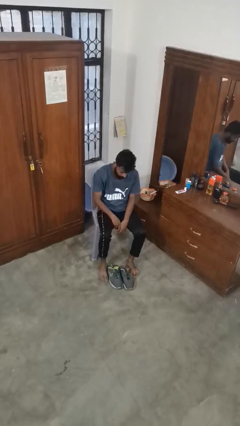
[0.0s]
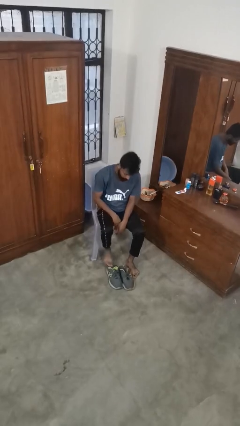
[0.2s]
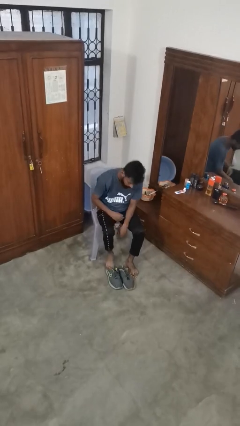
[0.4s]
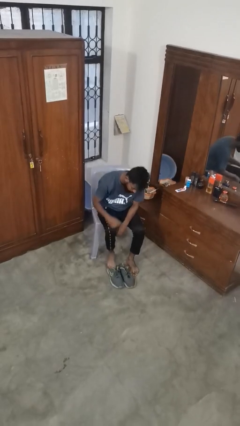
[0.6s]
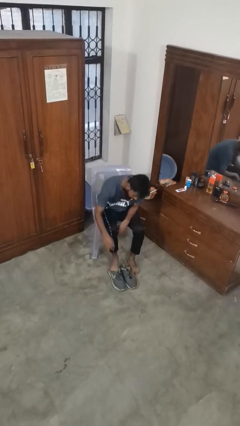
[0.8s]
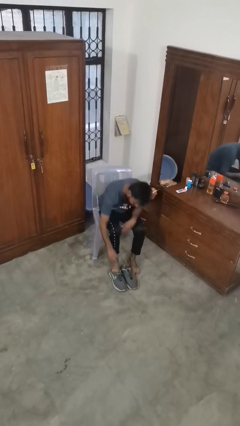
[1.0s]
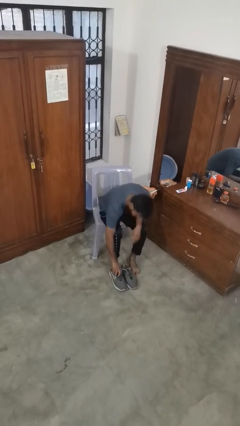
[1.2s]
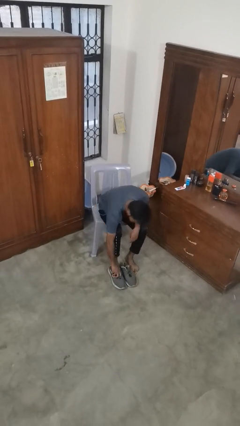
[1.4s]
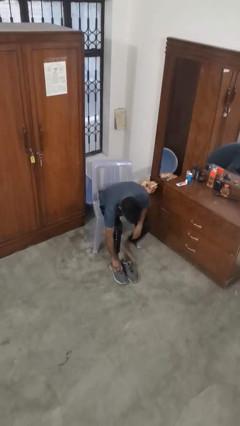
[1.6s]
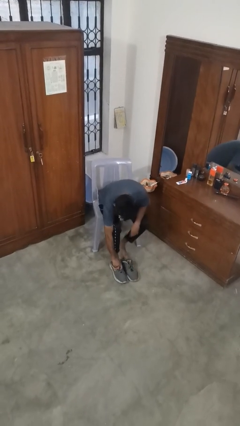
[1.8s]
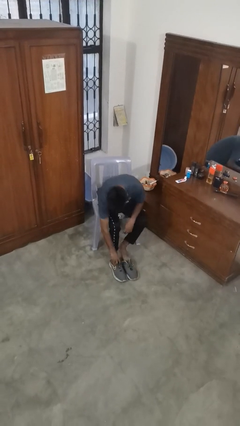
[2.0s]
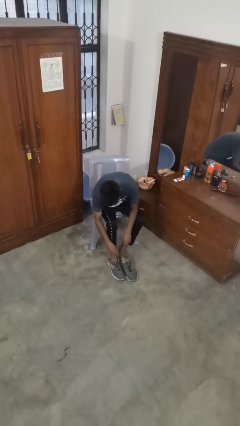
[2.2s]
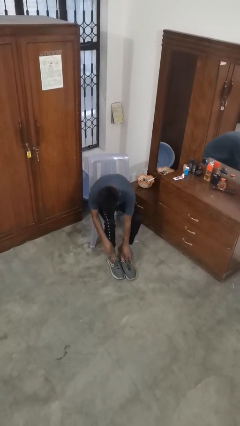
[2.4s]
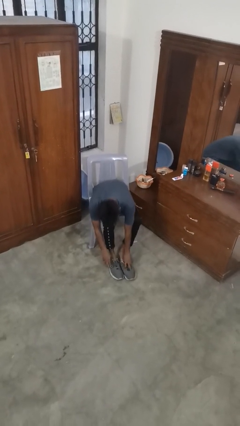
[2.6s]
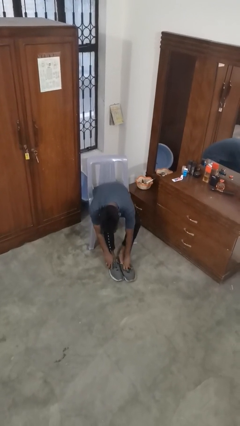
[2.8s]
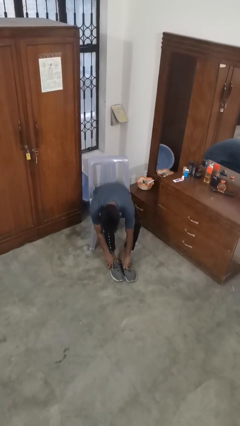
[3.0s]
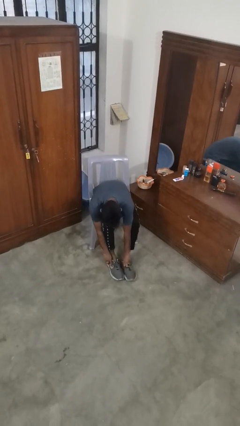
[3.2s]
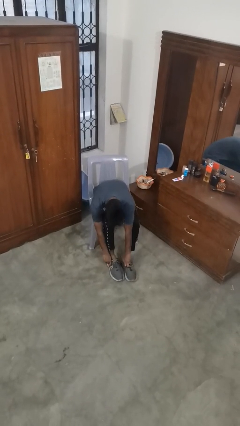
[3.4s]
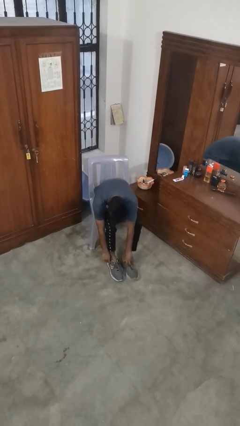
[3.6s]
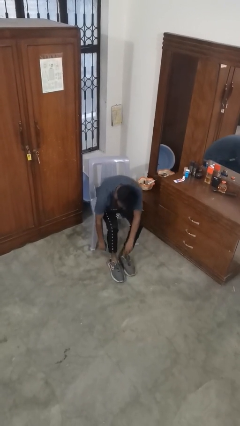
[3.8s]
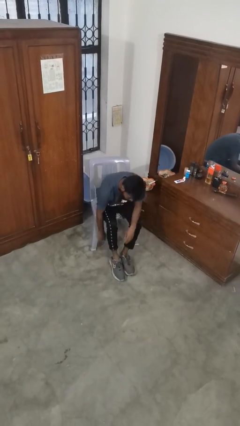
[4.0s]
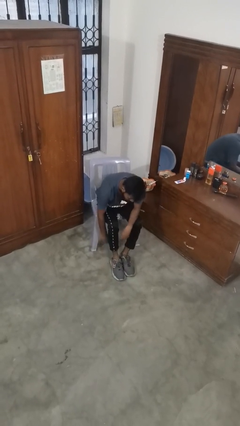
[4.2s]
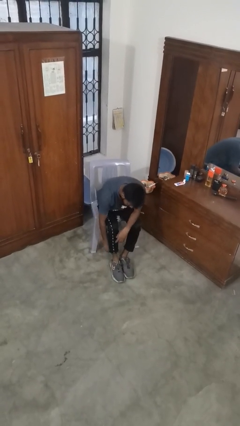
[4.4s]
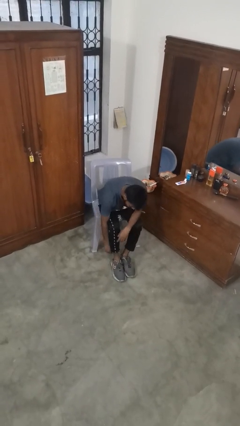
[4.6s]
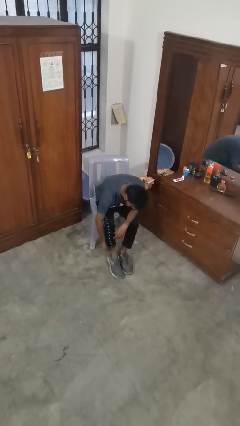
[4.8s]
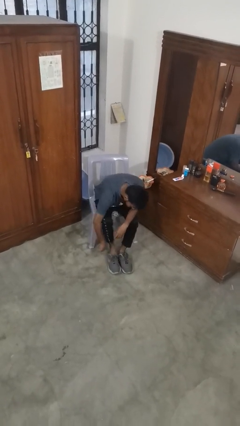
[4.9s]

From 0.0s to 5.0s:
person puts on shoes

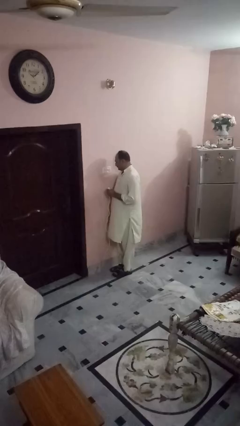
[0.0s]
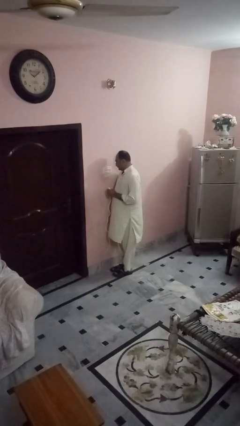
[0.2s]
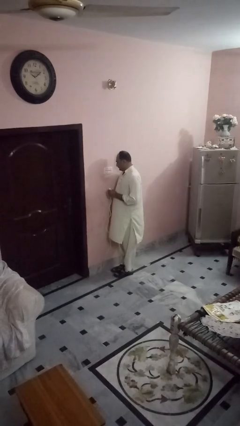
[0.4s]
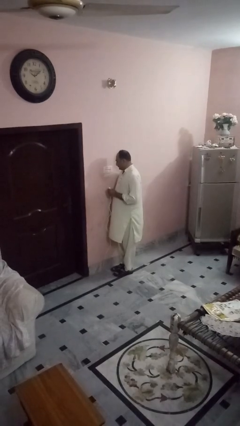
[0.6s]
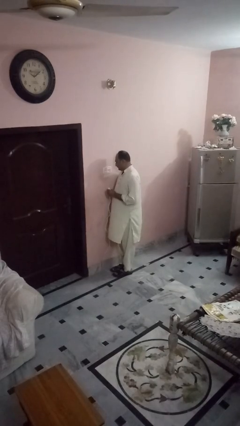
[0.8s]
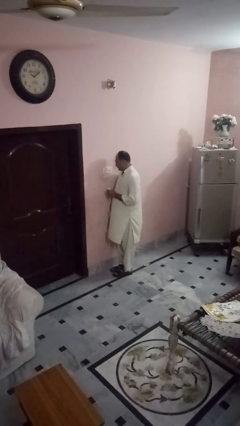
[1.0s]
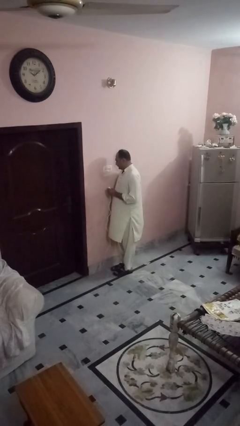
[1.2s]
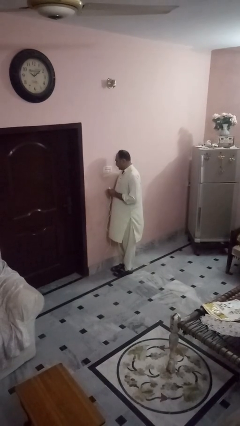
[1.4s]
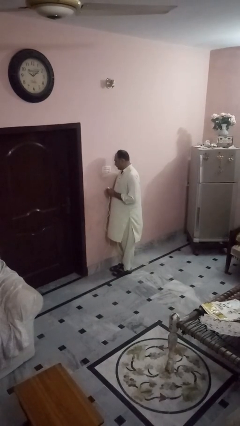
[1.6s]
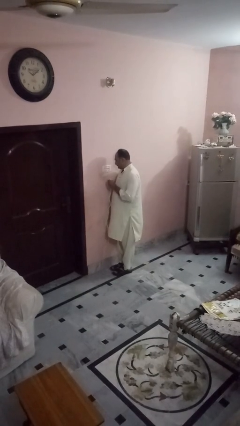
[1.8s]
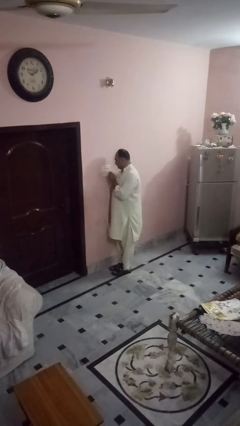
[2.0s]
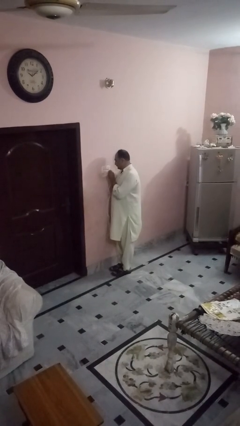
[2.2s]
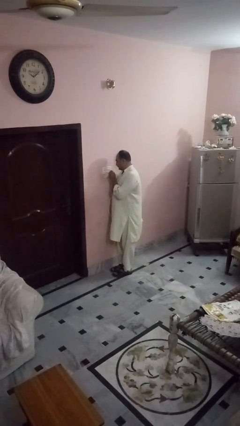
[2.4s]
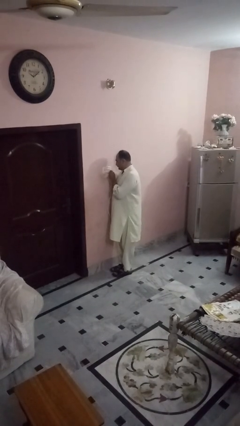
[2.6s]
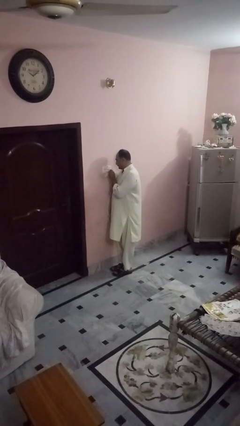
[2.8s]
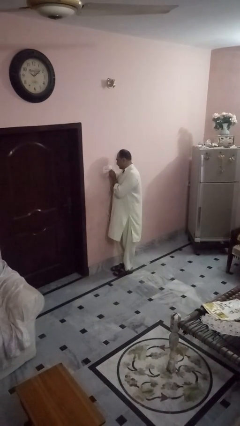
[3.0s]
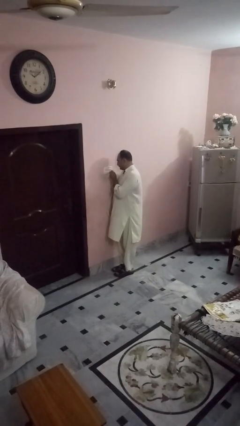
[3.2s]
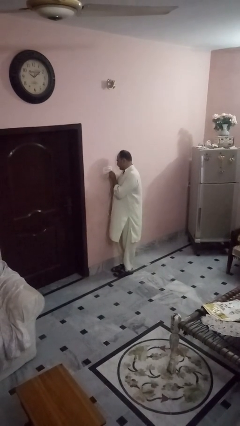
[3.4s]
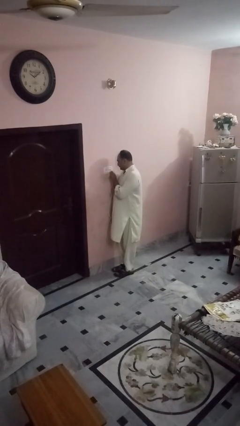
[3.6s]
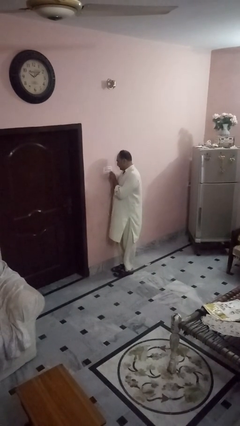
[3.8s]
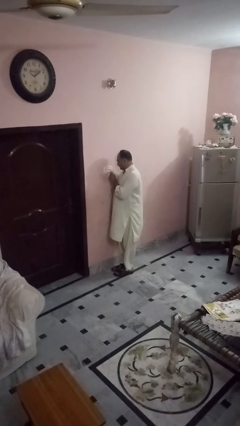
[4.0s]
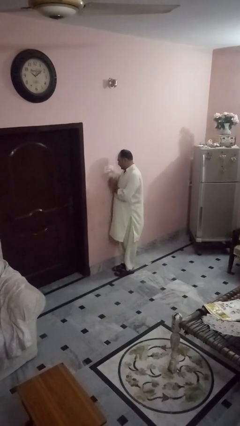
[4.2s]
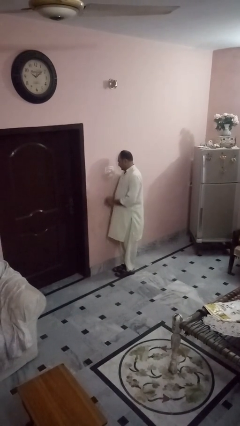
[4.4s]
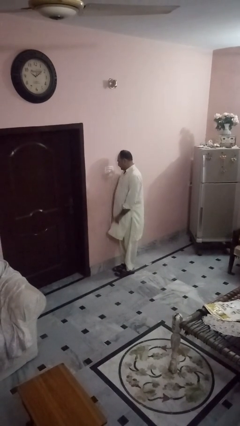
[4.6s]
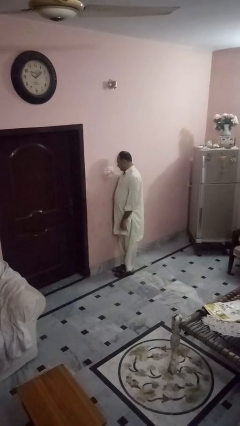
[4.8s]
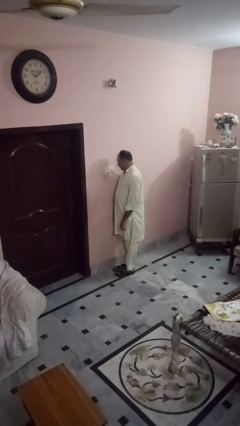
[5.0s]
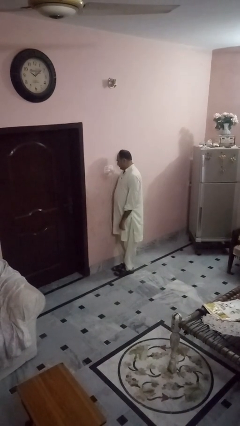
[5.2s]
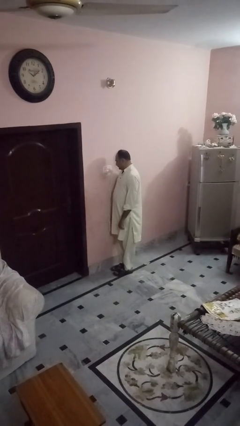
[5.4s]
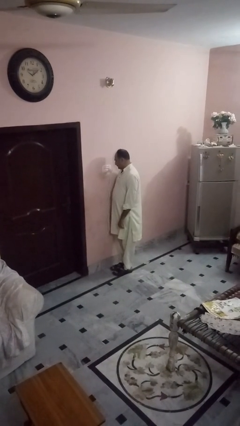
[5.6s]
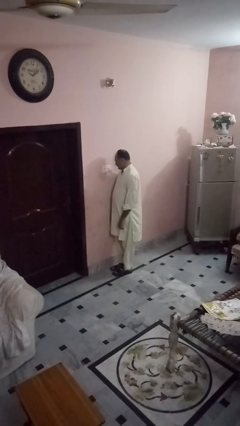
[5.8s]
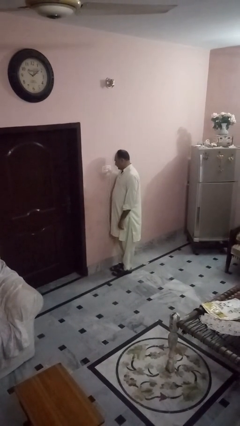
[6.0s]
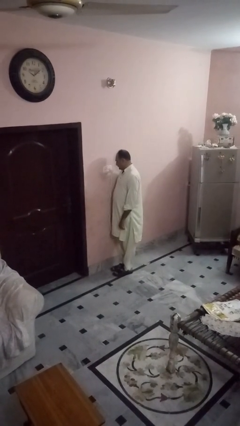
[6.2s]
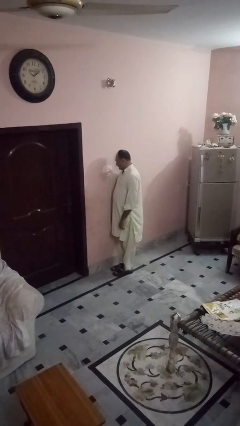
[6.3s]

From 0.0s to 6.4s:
person plugs into electrical socket

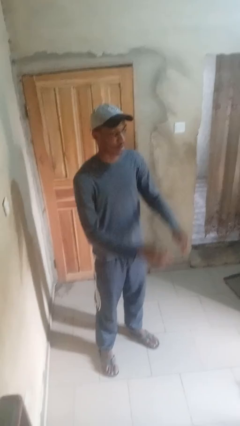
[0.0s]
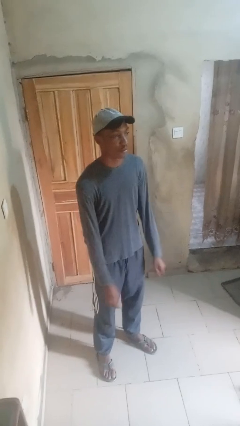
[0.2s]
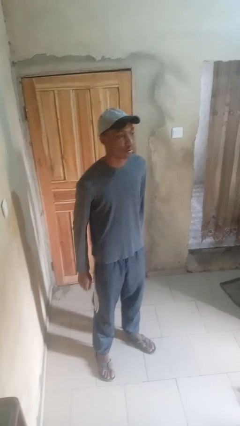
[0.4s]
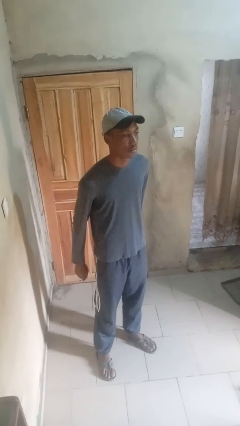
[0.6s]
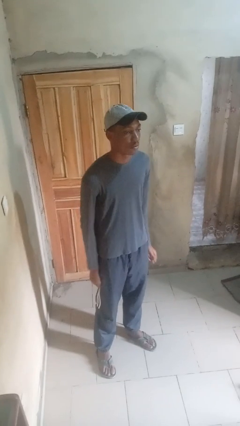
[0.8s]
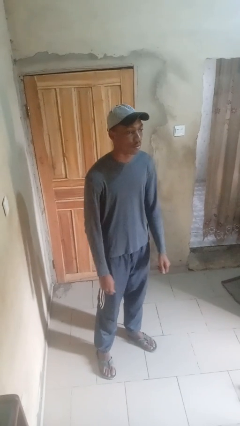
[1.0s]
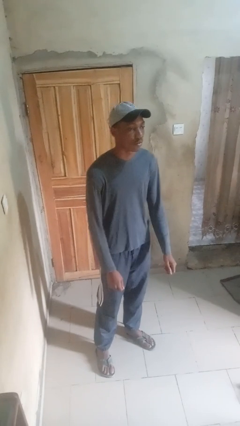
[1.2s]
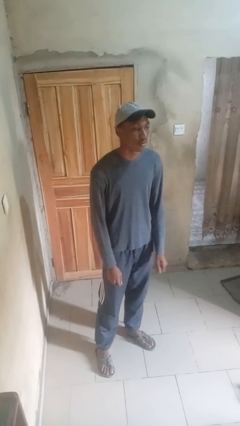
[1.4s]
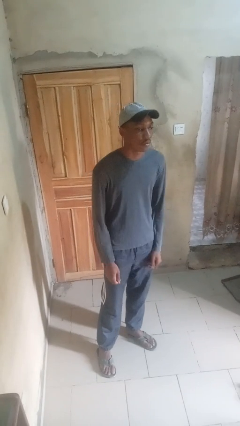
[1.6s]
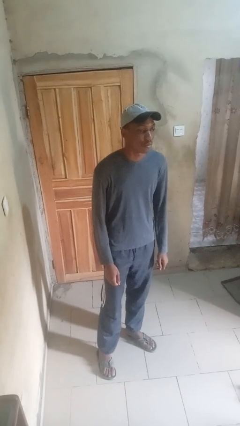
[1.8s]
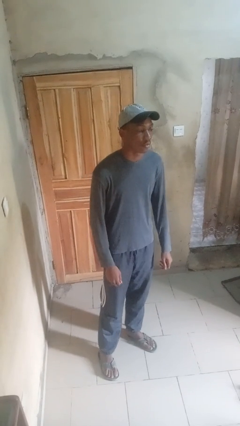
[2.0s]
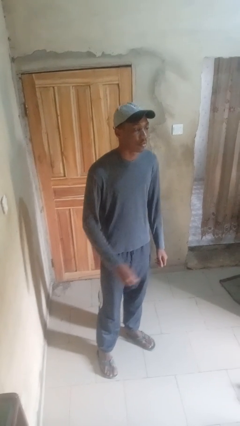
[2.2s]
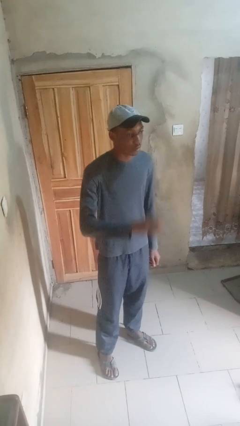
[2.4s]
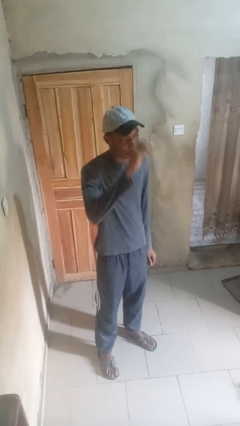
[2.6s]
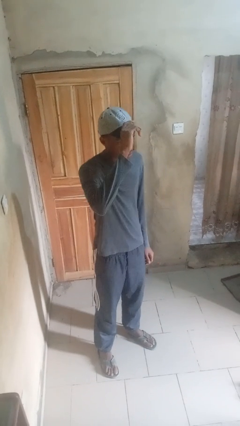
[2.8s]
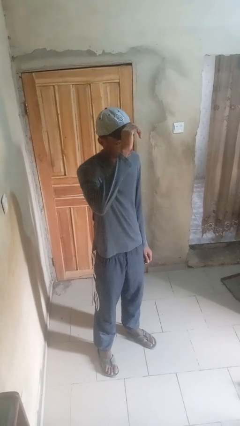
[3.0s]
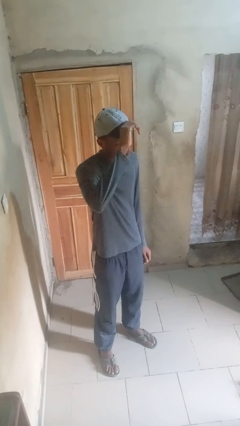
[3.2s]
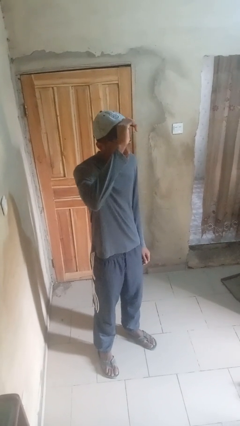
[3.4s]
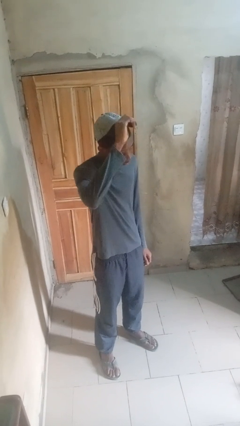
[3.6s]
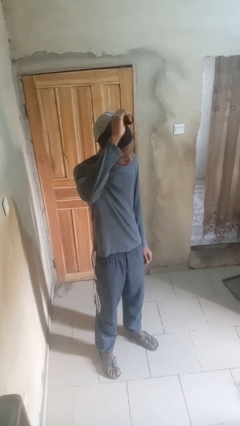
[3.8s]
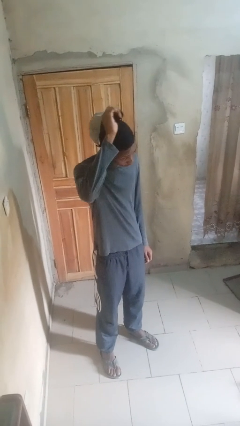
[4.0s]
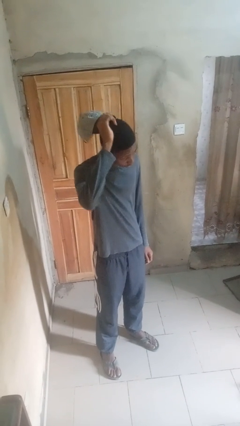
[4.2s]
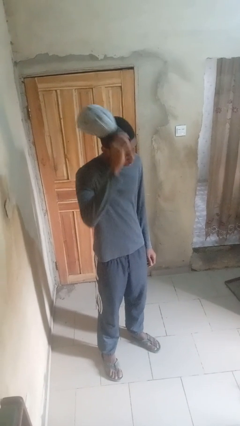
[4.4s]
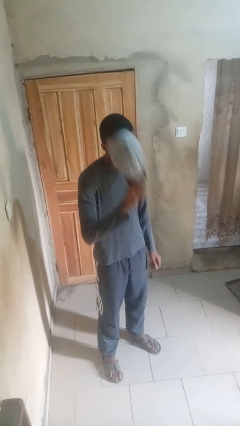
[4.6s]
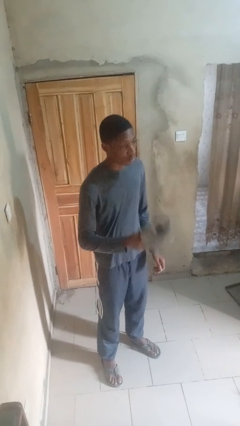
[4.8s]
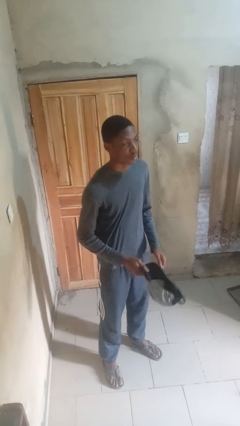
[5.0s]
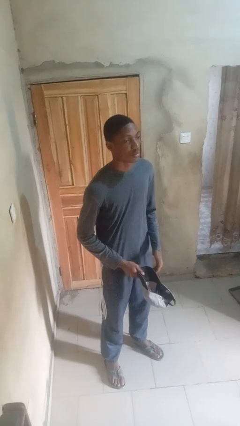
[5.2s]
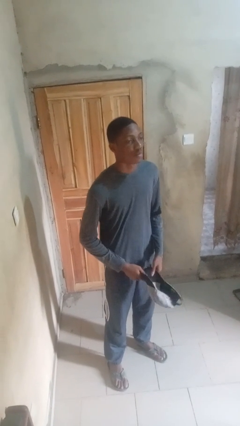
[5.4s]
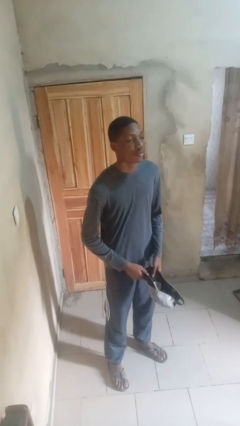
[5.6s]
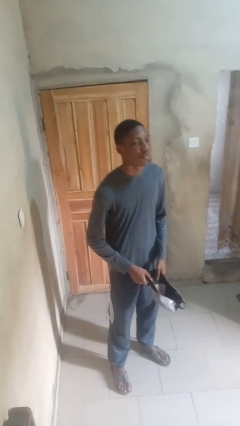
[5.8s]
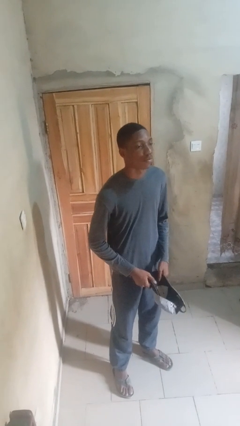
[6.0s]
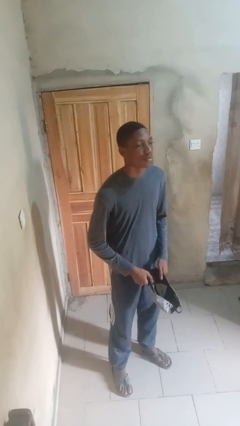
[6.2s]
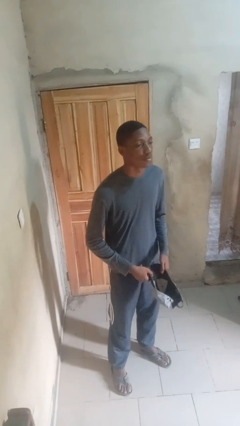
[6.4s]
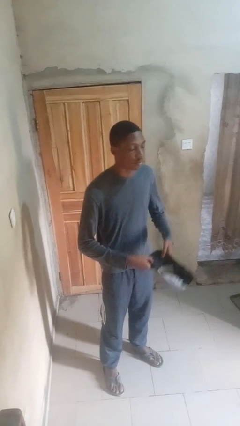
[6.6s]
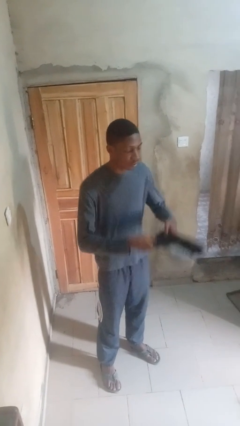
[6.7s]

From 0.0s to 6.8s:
person takes off hat
